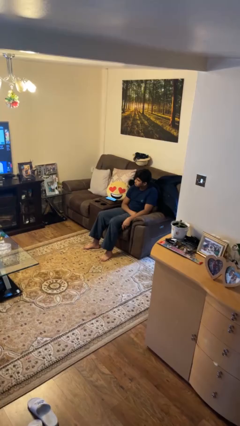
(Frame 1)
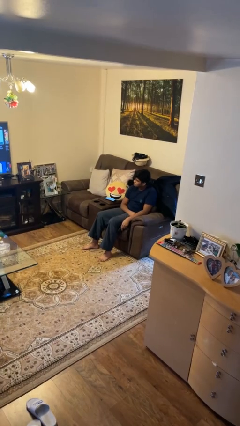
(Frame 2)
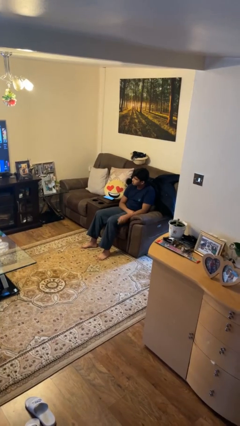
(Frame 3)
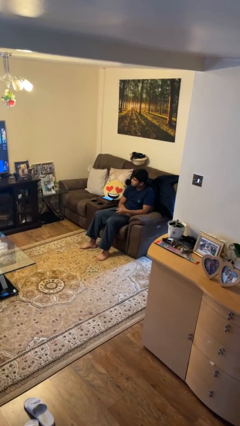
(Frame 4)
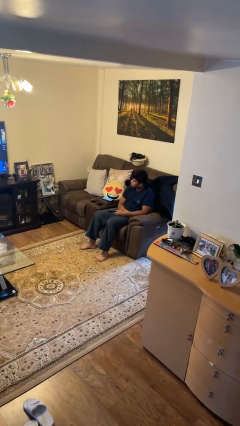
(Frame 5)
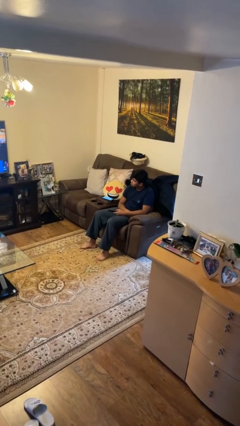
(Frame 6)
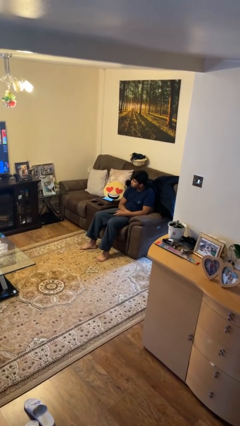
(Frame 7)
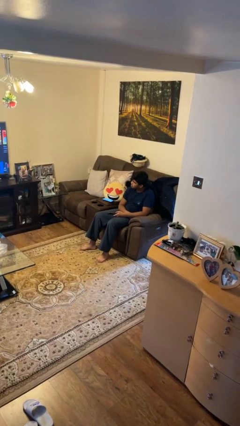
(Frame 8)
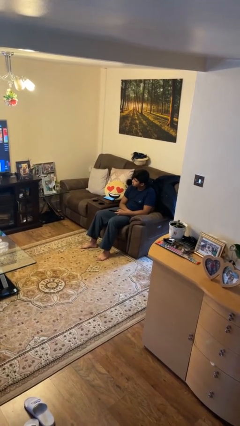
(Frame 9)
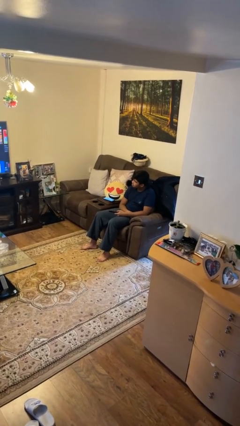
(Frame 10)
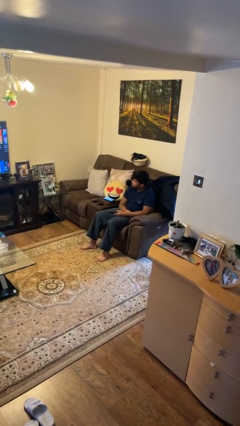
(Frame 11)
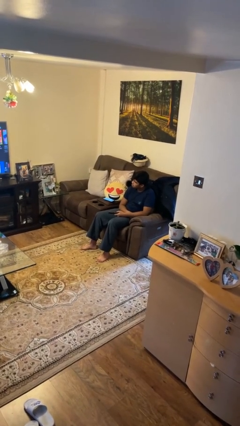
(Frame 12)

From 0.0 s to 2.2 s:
person uses television remote

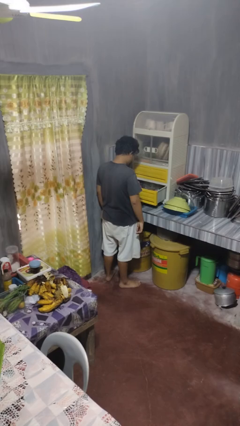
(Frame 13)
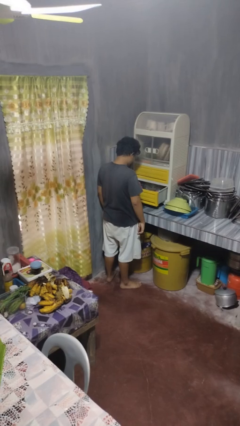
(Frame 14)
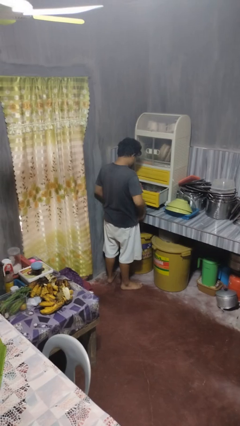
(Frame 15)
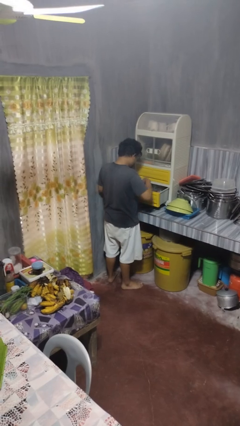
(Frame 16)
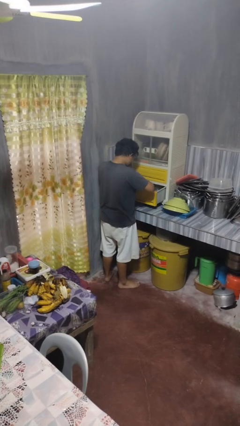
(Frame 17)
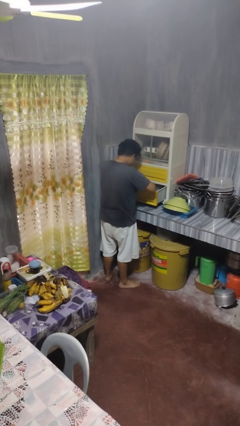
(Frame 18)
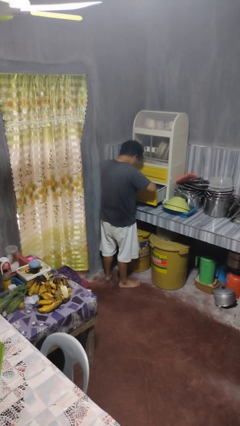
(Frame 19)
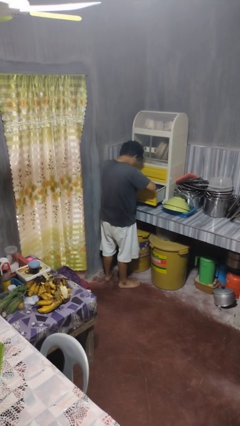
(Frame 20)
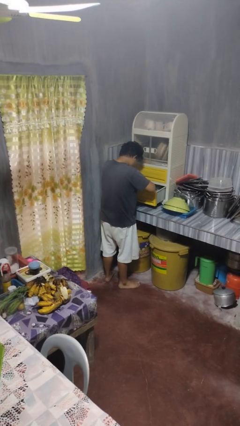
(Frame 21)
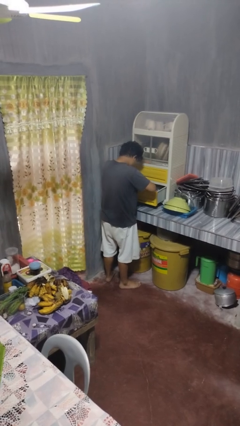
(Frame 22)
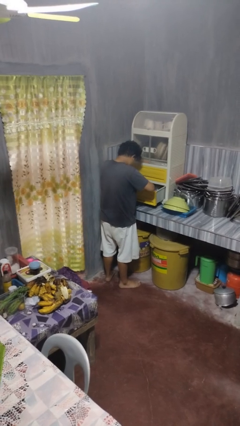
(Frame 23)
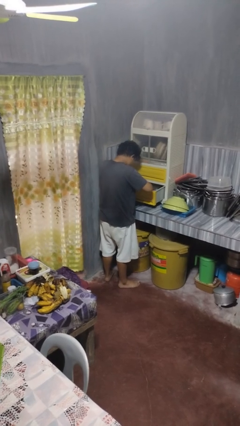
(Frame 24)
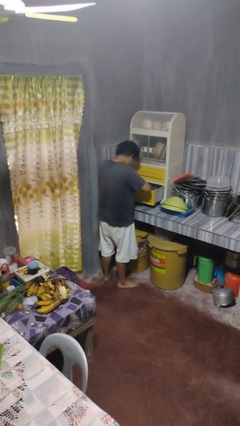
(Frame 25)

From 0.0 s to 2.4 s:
person searches in kitchen drawer

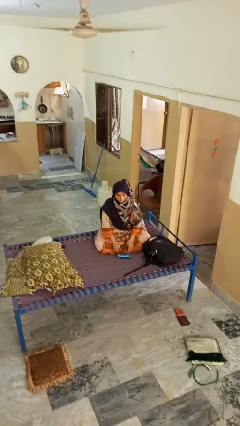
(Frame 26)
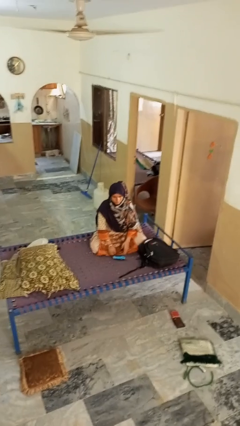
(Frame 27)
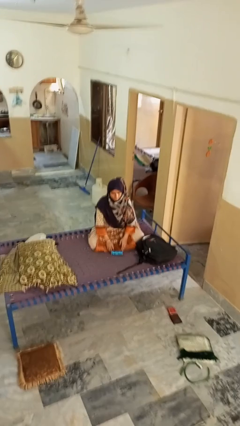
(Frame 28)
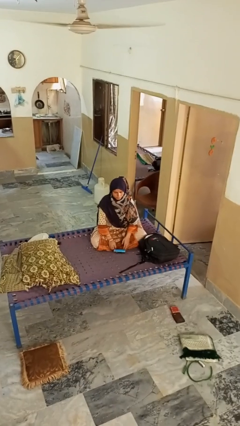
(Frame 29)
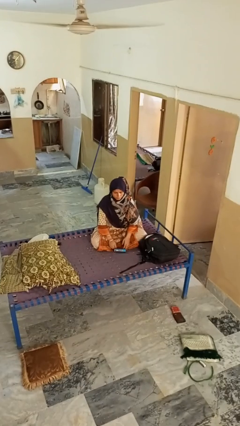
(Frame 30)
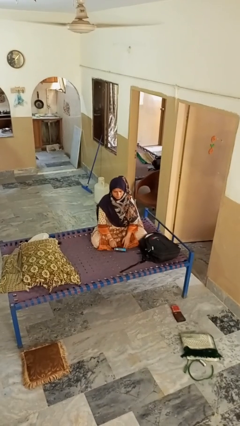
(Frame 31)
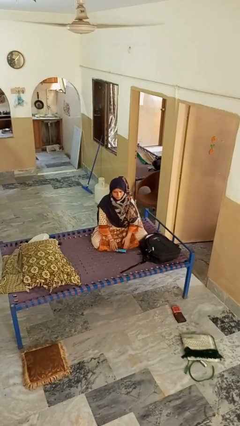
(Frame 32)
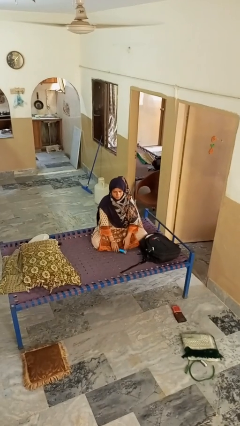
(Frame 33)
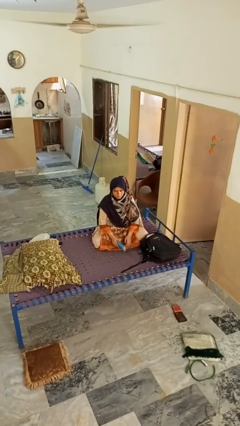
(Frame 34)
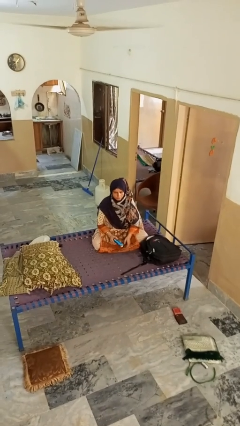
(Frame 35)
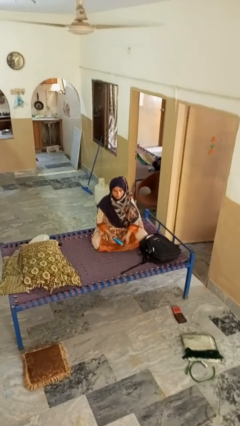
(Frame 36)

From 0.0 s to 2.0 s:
person picks up object from floor

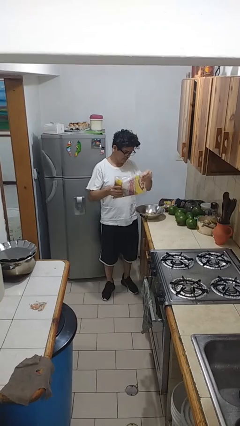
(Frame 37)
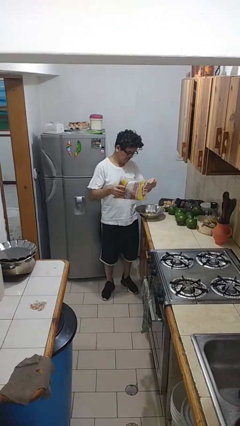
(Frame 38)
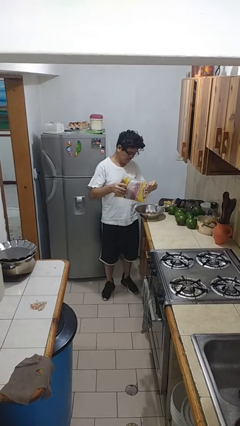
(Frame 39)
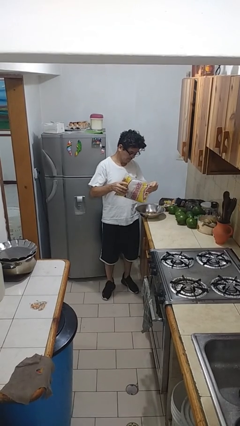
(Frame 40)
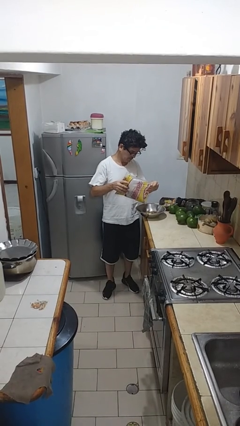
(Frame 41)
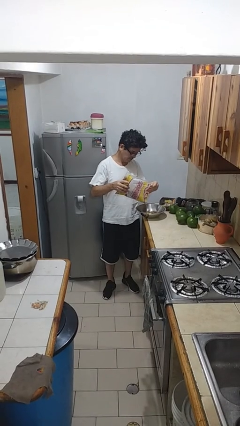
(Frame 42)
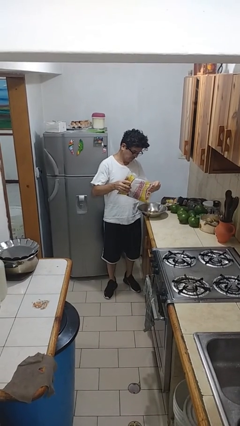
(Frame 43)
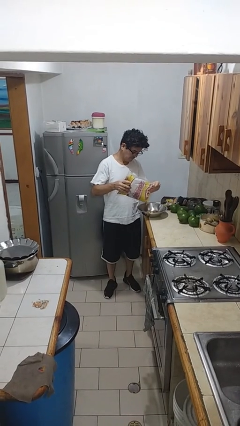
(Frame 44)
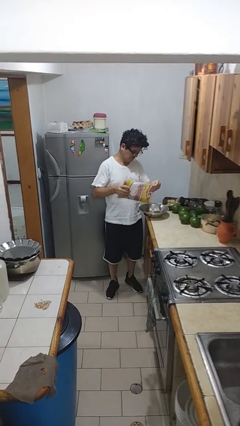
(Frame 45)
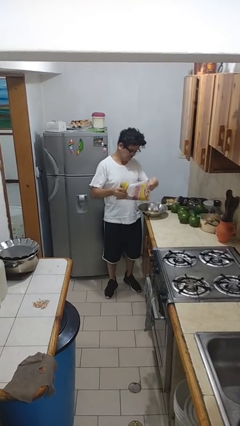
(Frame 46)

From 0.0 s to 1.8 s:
person pours into bowl

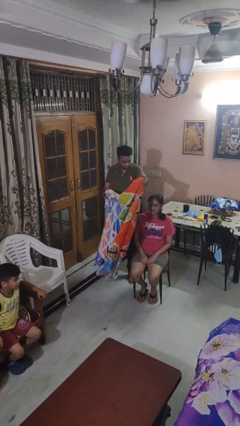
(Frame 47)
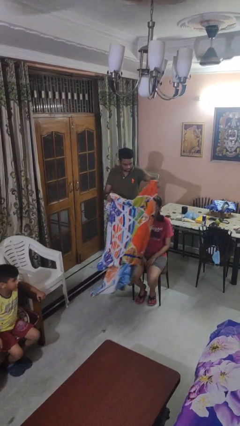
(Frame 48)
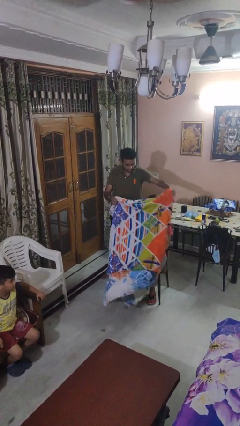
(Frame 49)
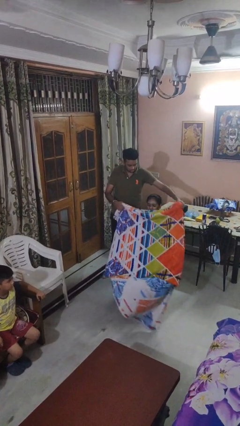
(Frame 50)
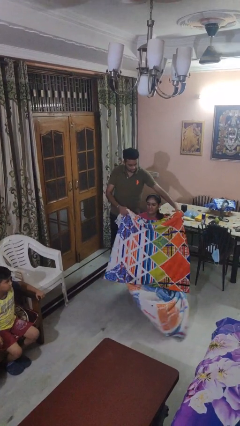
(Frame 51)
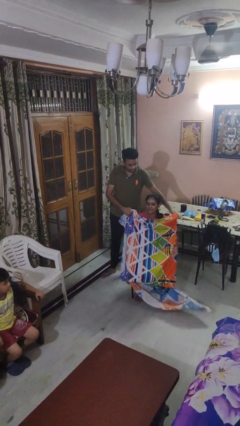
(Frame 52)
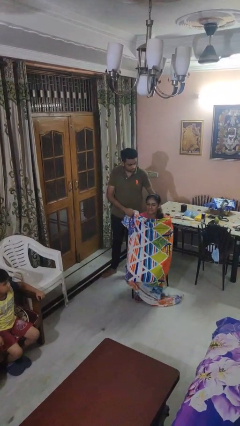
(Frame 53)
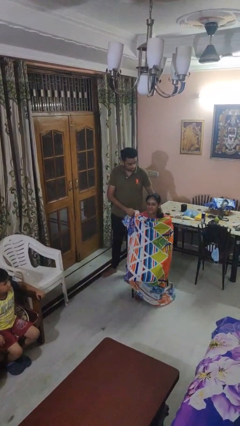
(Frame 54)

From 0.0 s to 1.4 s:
person covers friend with blanket

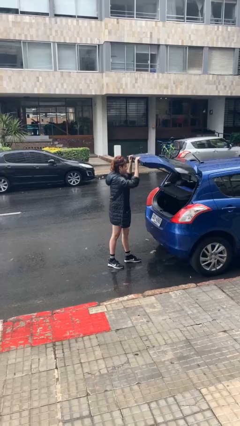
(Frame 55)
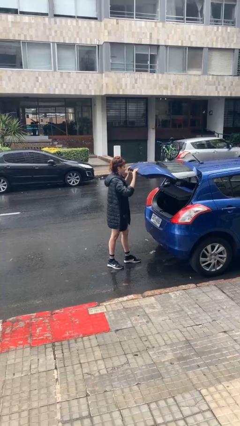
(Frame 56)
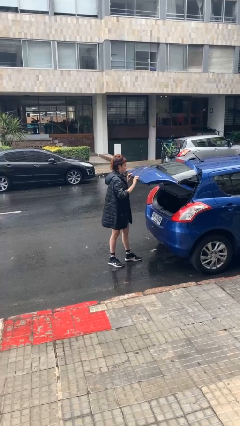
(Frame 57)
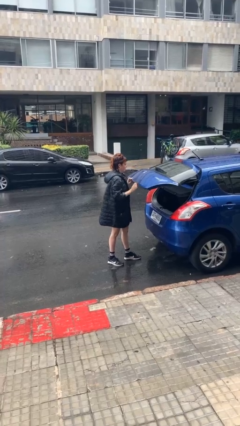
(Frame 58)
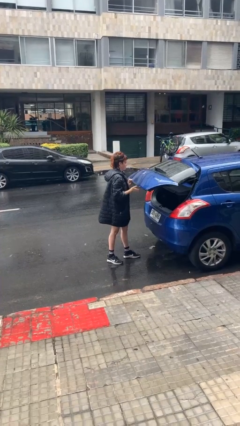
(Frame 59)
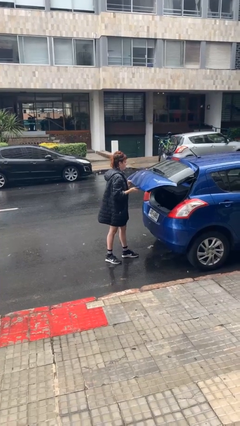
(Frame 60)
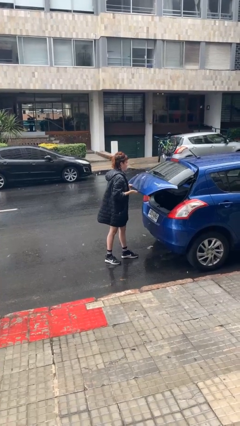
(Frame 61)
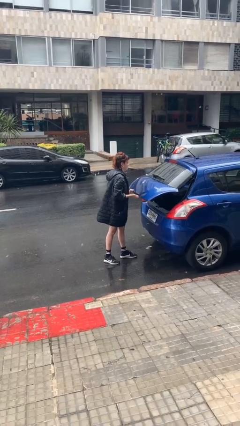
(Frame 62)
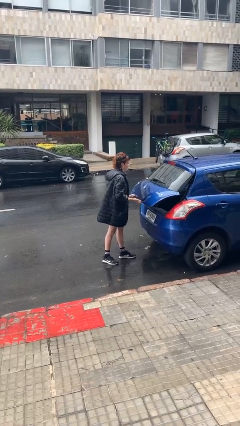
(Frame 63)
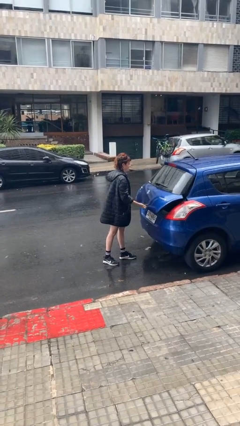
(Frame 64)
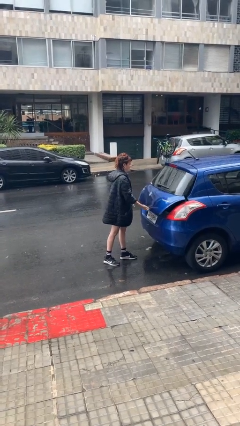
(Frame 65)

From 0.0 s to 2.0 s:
person closes car trunk

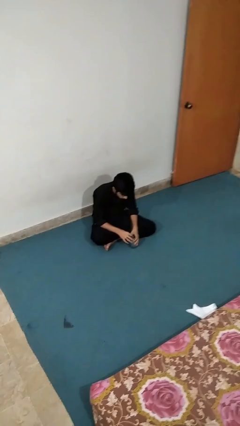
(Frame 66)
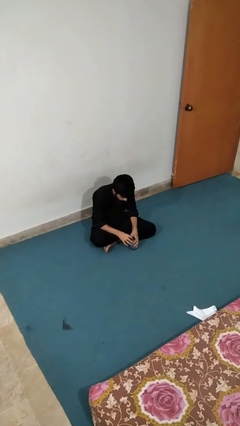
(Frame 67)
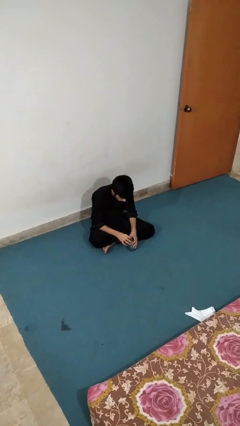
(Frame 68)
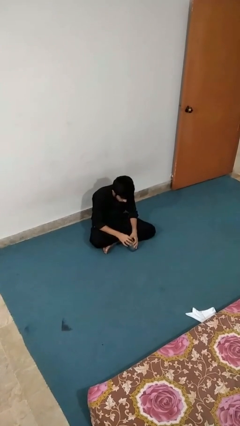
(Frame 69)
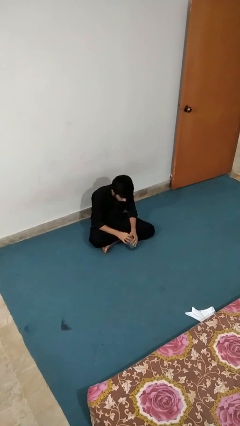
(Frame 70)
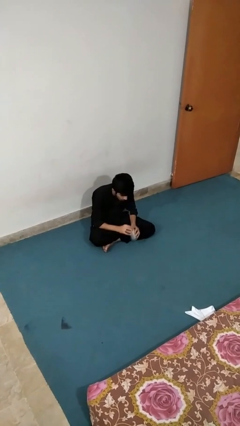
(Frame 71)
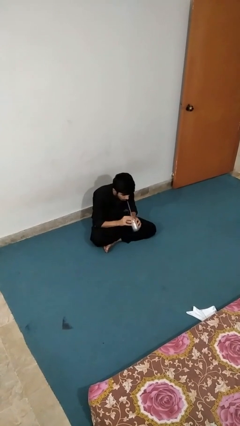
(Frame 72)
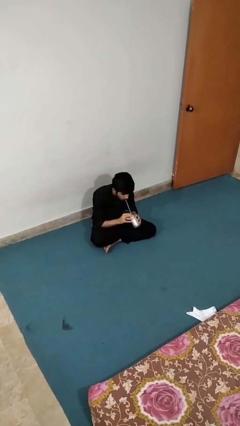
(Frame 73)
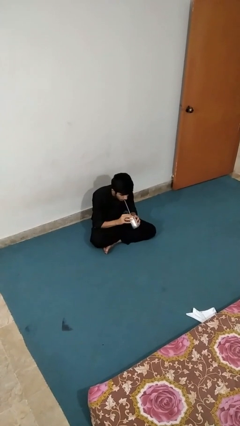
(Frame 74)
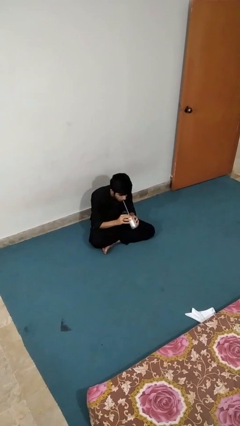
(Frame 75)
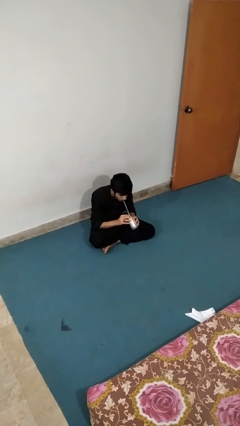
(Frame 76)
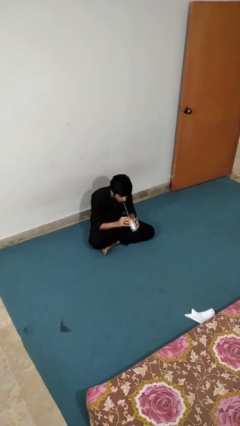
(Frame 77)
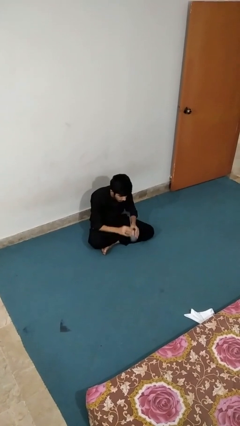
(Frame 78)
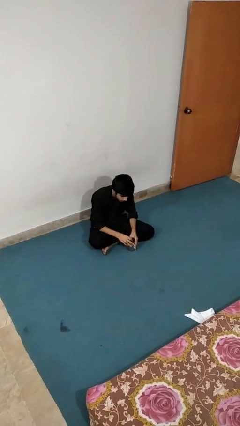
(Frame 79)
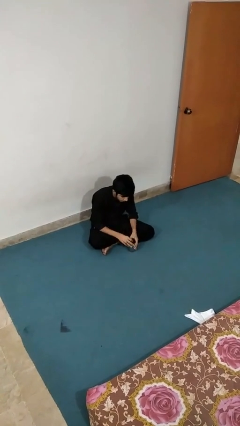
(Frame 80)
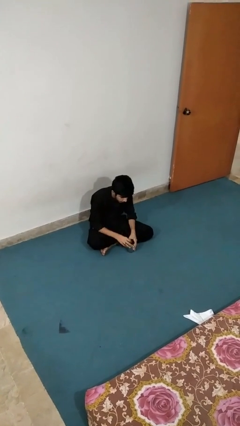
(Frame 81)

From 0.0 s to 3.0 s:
person drinks from straw

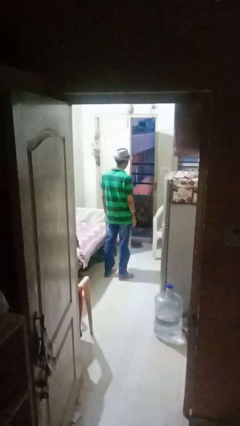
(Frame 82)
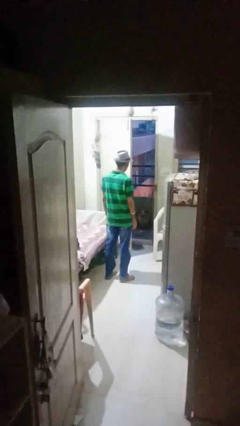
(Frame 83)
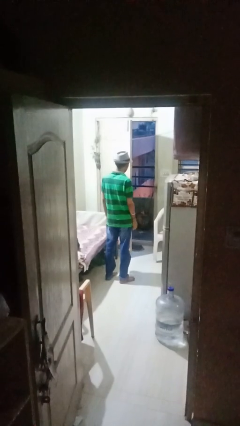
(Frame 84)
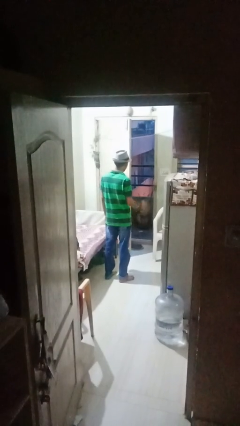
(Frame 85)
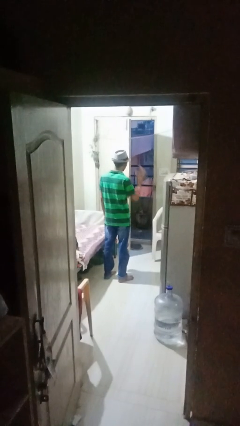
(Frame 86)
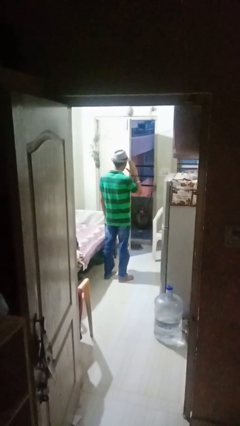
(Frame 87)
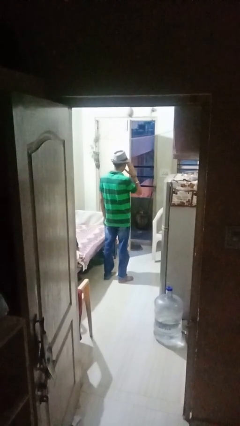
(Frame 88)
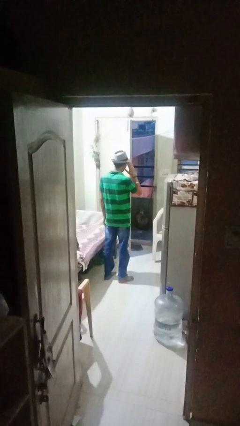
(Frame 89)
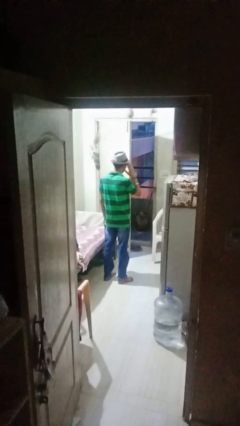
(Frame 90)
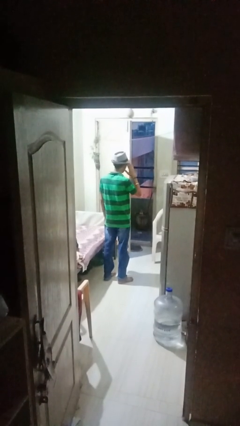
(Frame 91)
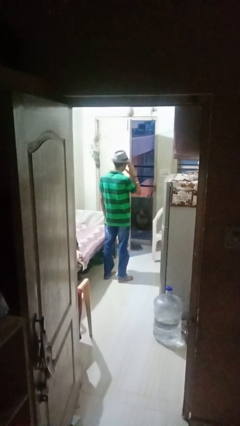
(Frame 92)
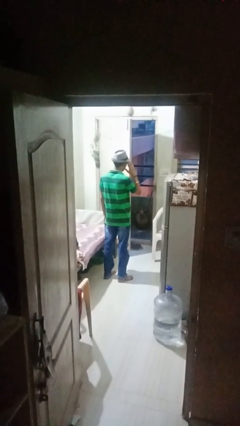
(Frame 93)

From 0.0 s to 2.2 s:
person salutes
